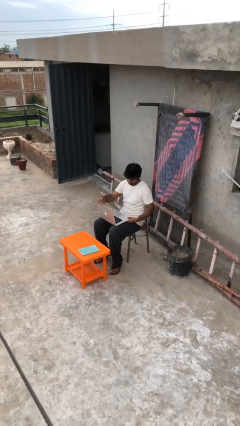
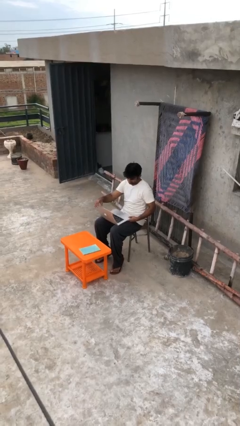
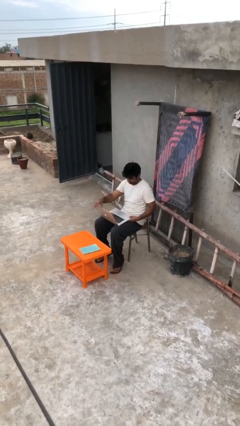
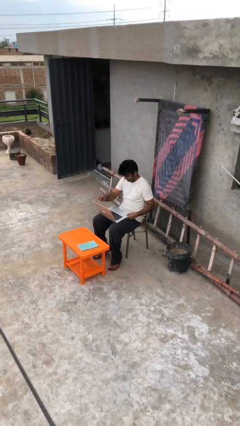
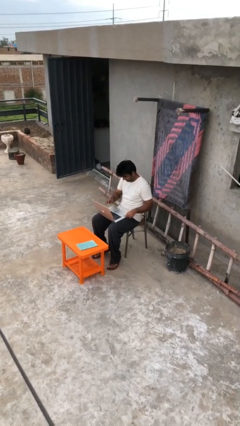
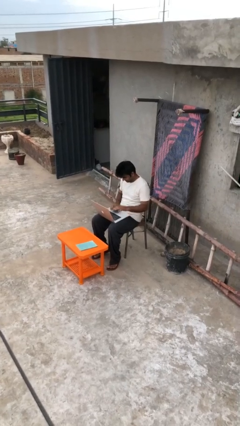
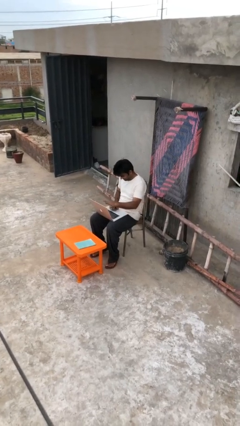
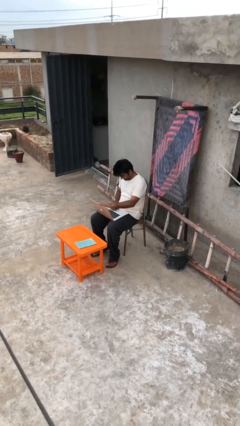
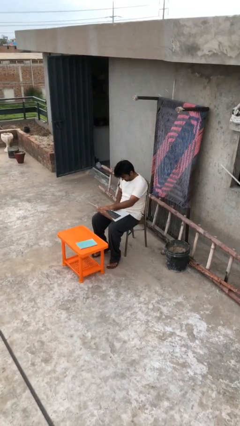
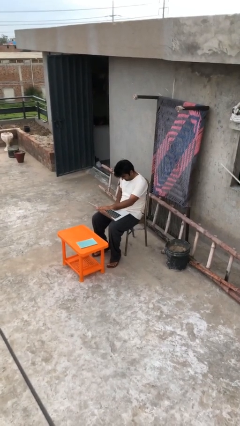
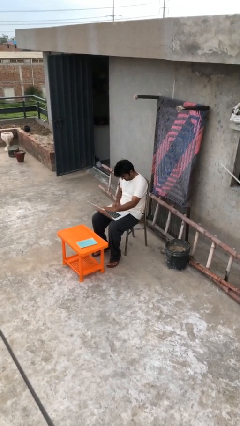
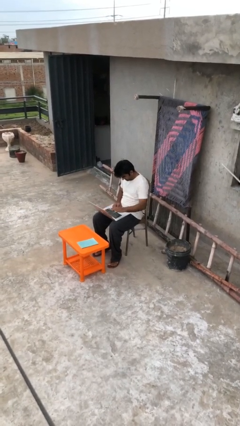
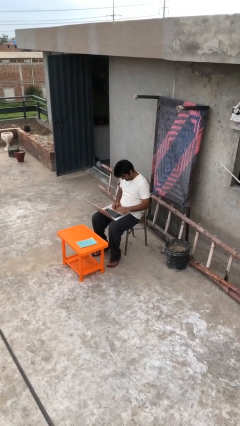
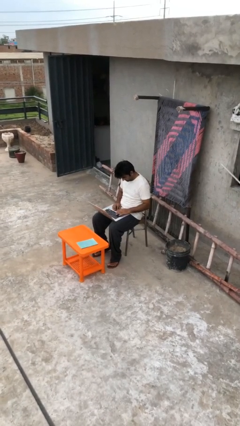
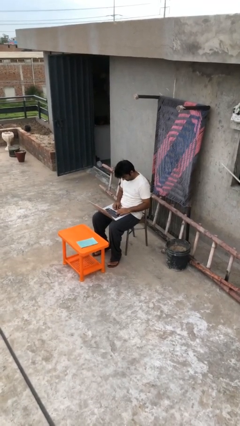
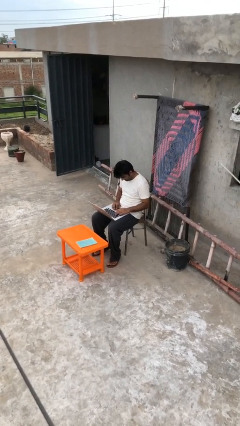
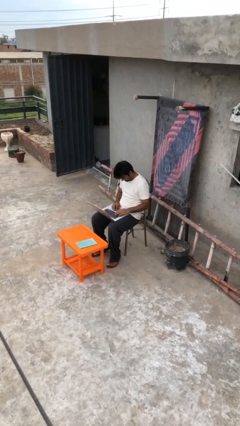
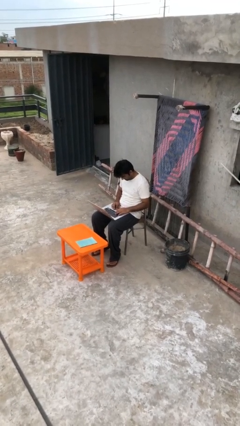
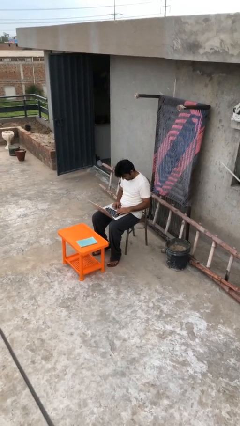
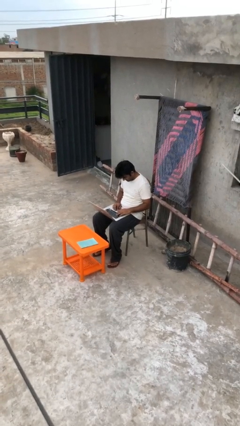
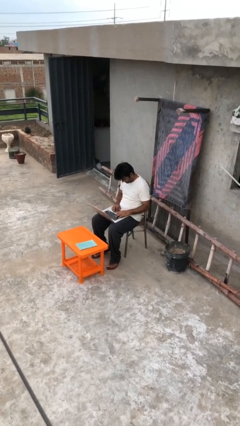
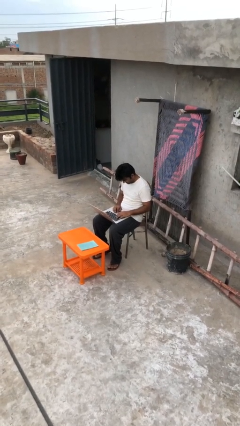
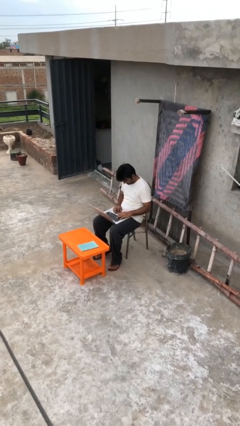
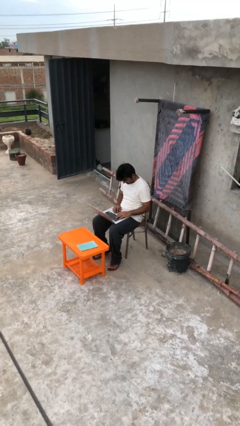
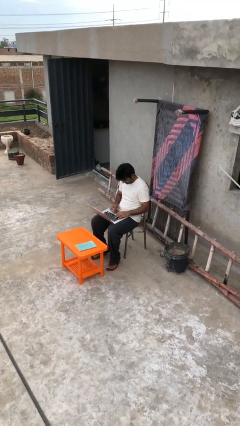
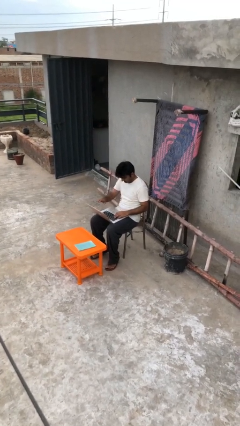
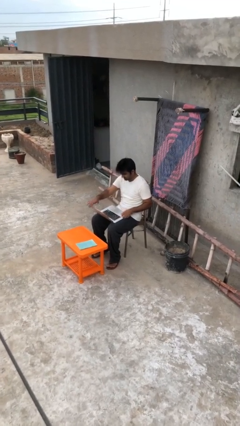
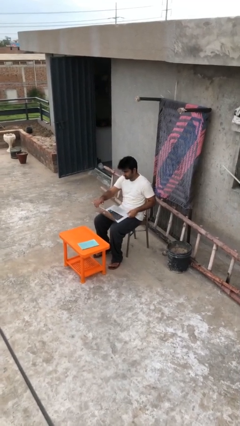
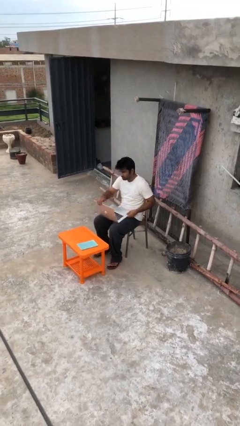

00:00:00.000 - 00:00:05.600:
person interacts with laptop

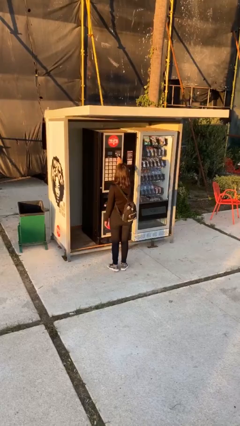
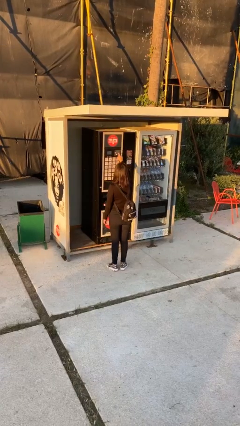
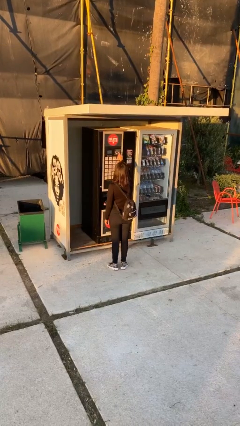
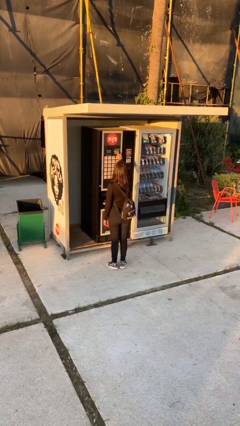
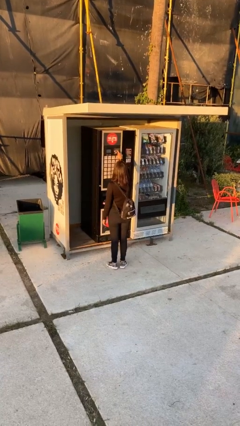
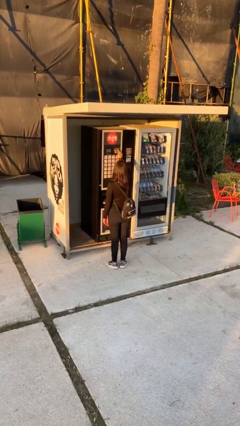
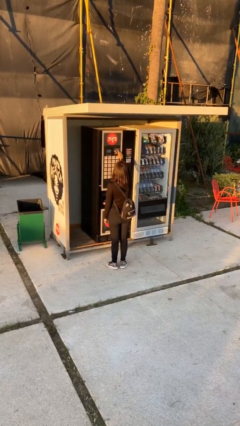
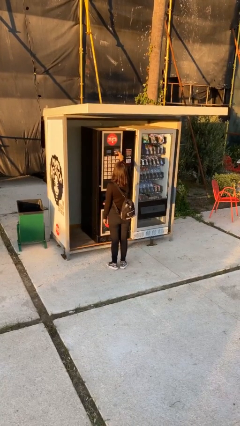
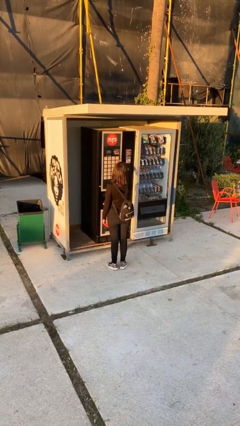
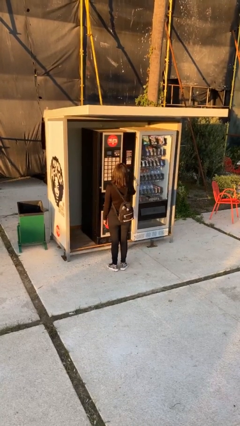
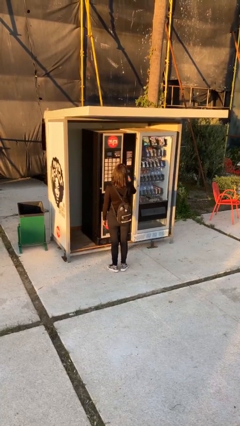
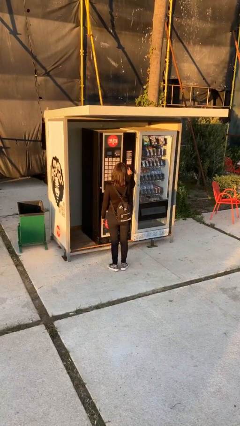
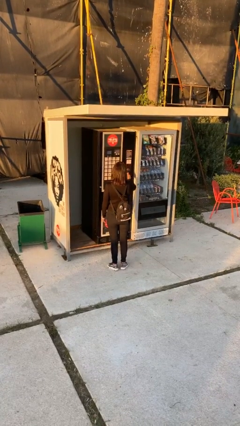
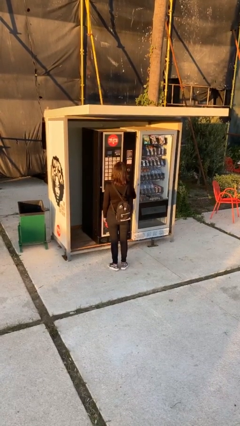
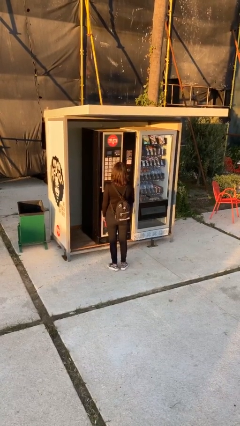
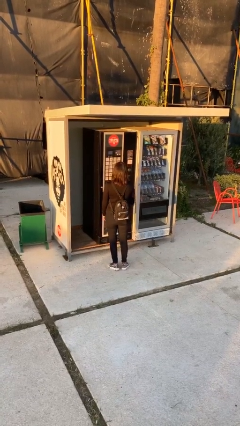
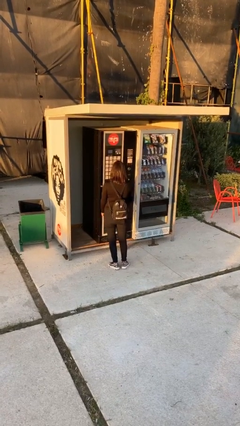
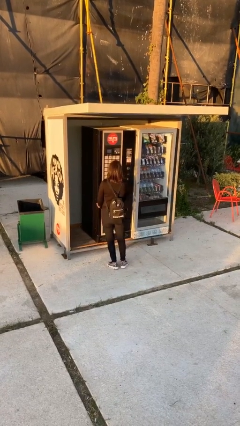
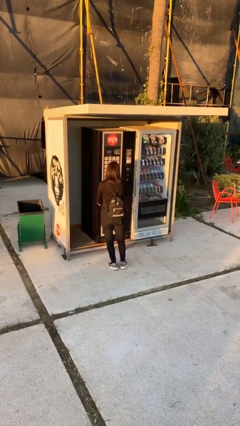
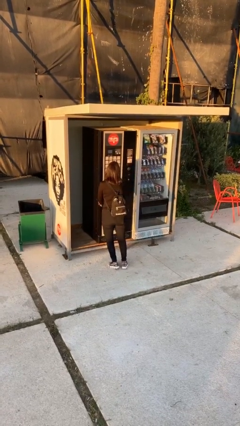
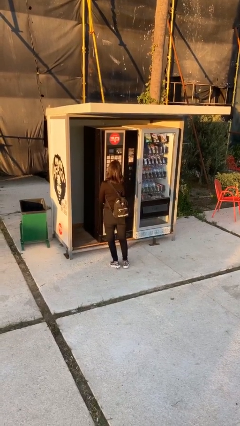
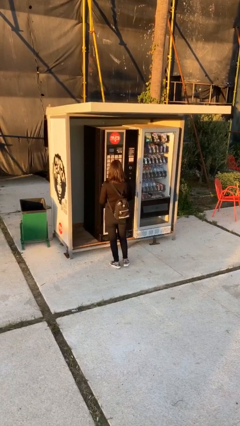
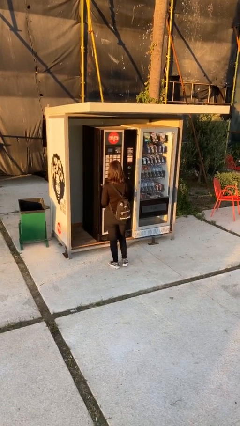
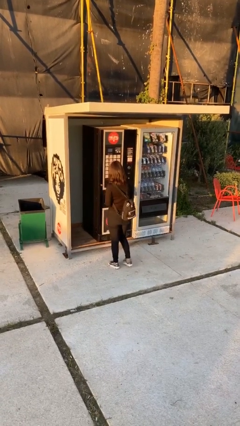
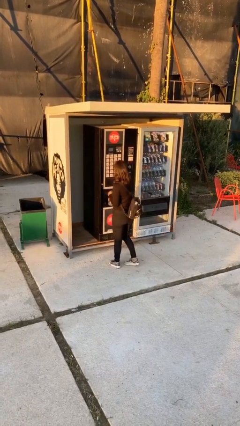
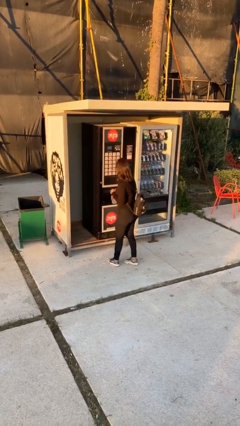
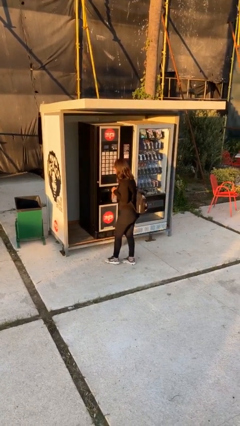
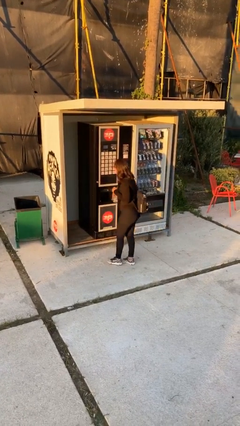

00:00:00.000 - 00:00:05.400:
person purchases from machine

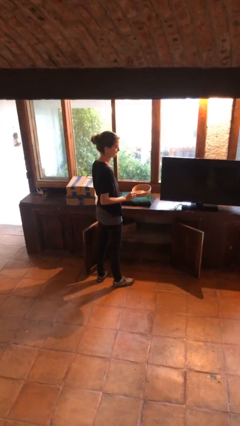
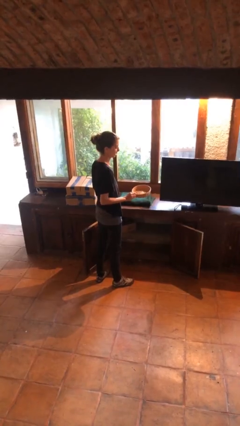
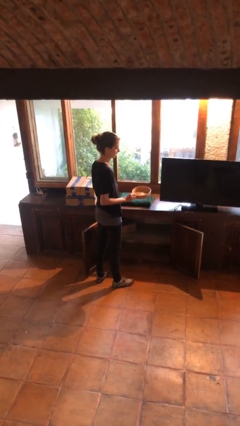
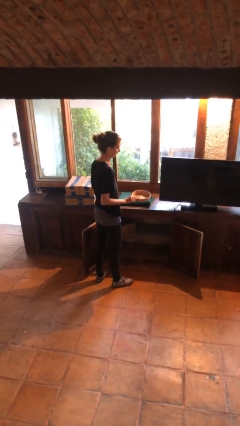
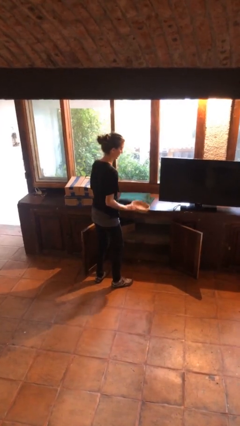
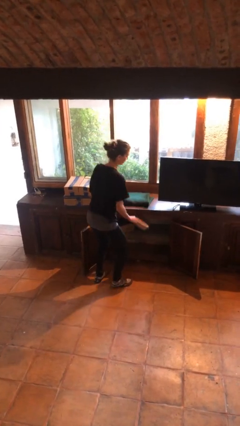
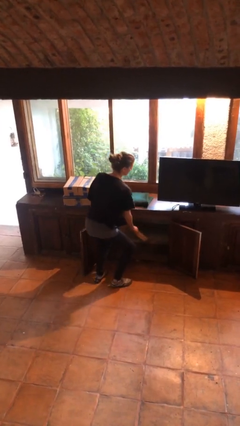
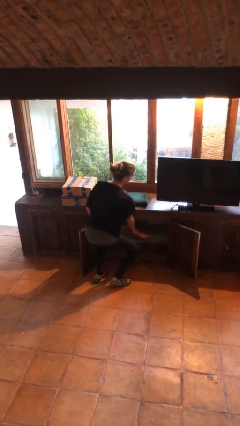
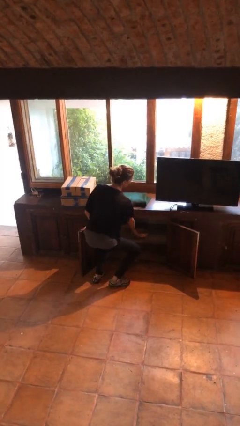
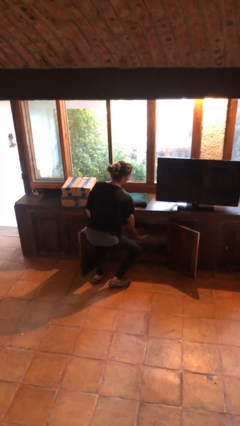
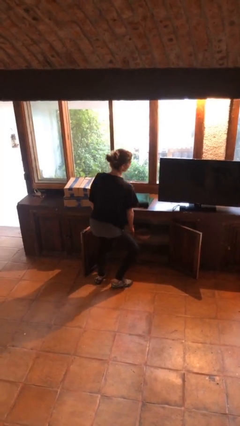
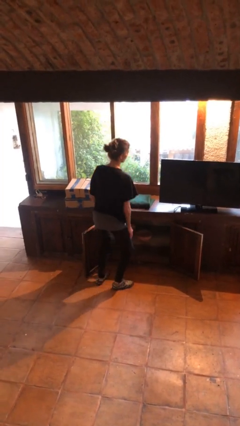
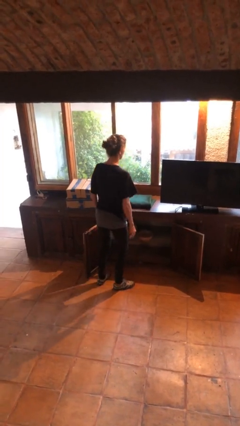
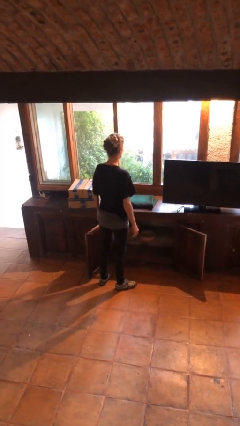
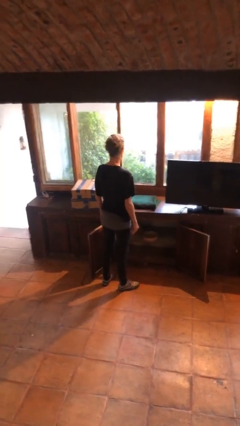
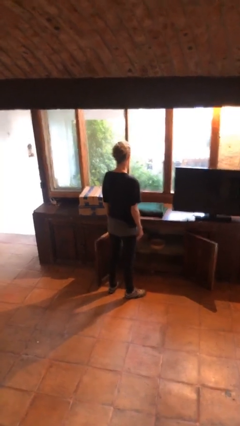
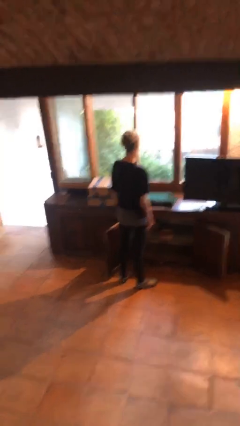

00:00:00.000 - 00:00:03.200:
person puts down object into cabinet

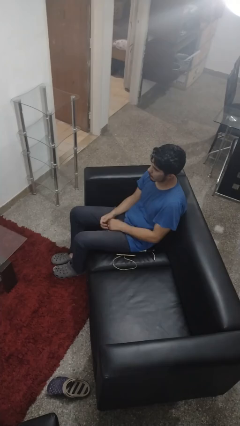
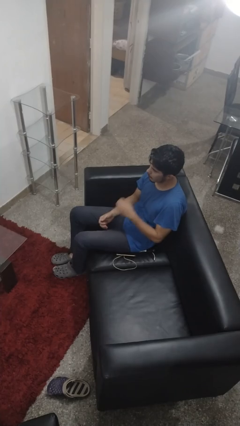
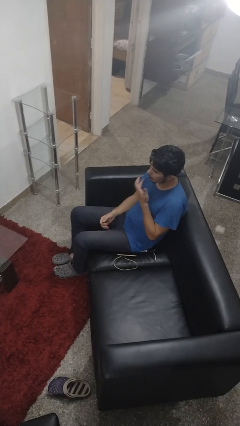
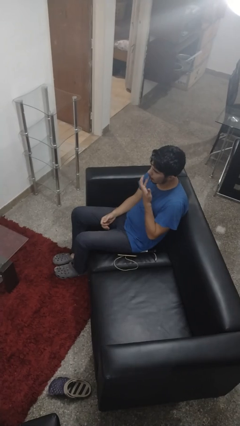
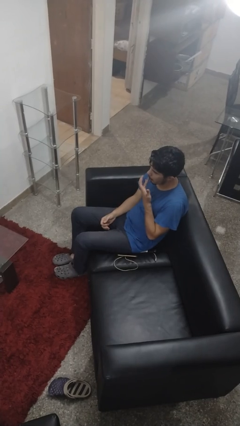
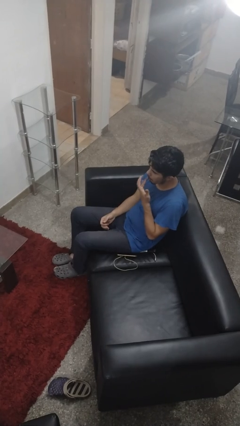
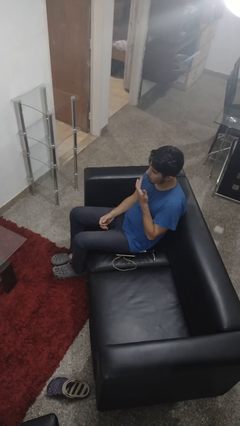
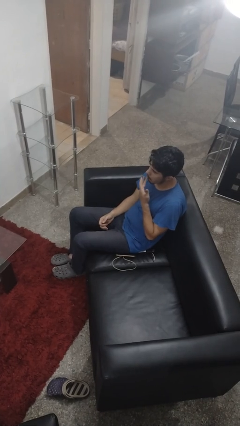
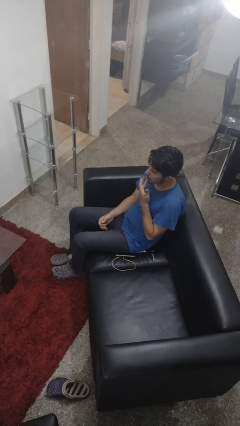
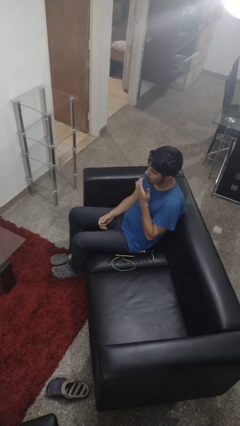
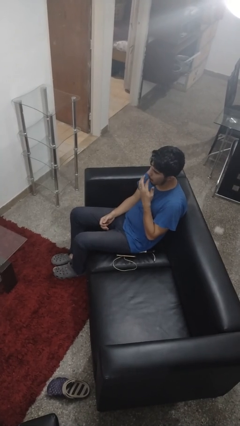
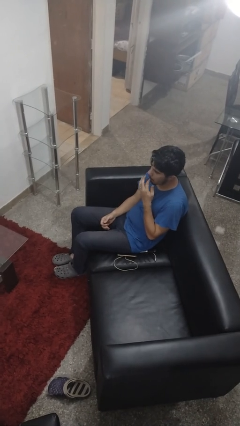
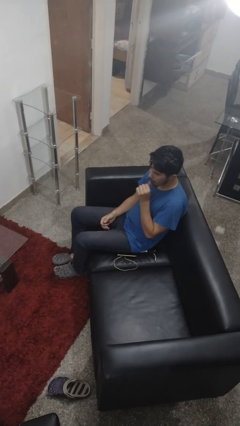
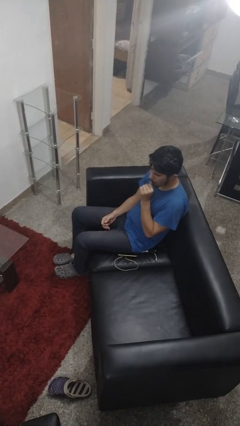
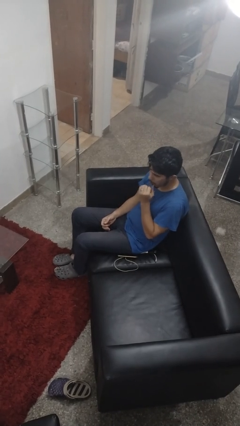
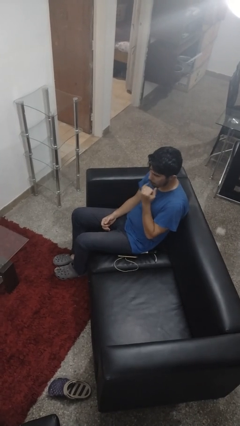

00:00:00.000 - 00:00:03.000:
person licks fingers

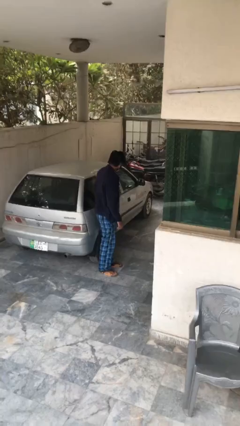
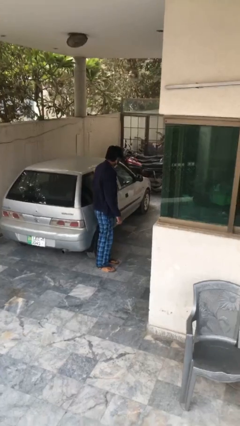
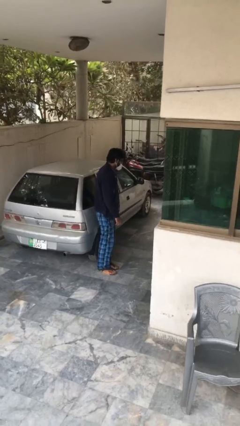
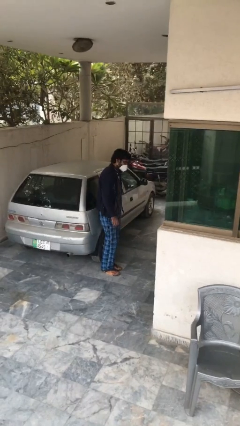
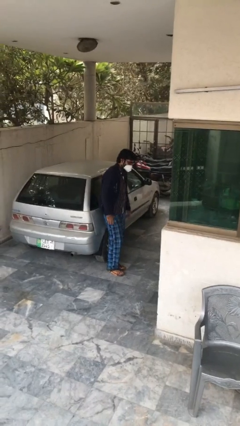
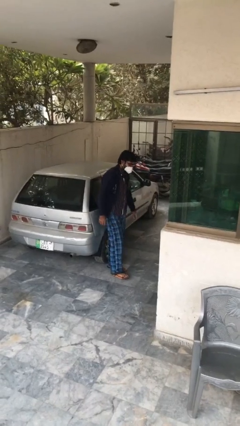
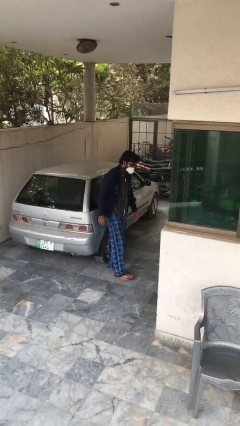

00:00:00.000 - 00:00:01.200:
person closes car door
